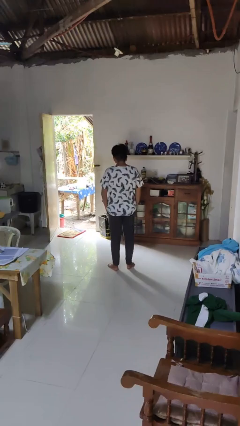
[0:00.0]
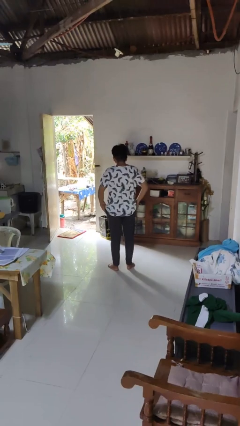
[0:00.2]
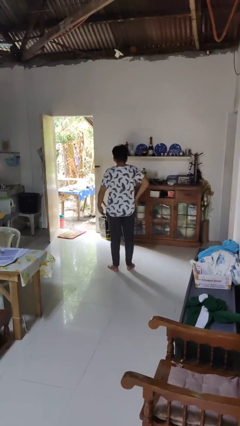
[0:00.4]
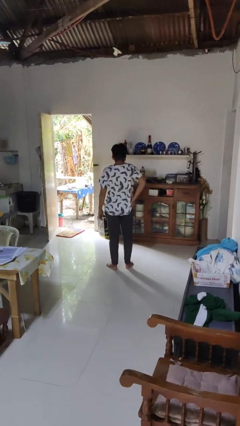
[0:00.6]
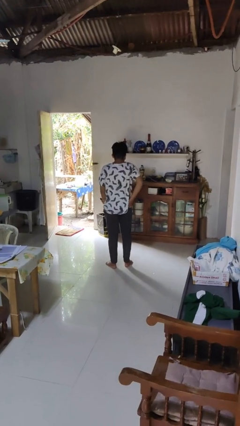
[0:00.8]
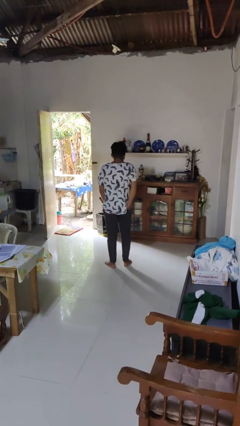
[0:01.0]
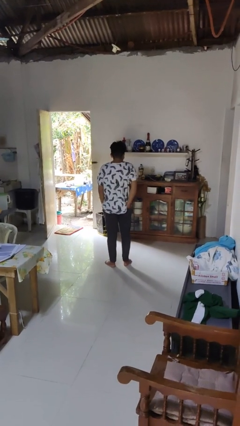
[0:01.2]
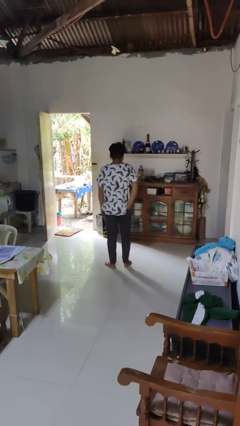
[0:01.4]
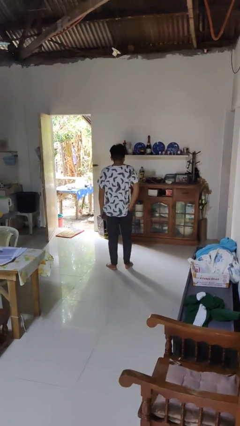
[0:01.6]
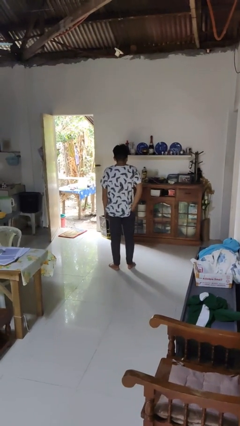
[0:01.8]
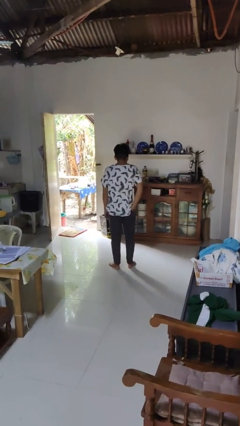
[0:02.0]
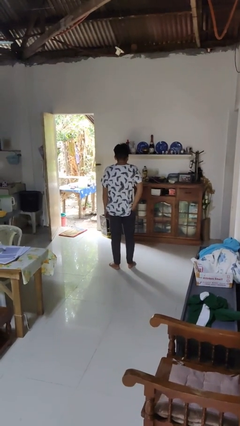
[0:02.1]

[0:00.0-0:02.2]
person puts hands in back pockets

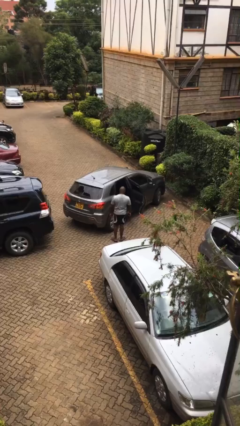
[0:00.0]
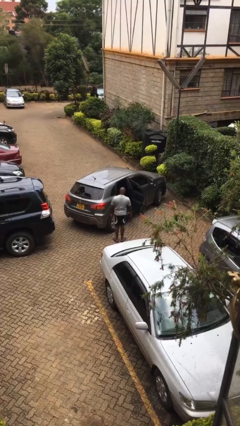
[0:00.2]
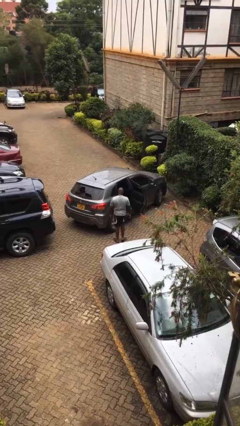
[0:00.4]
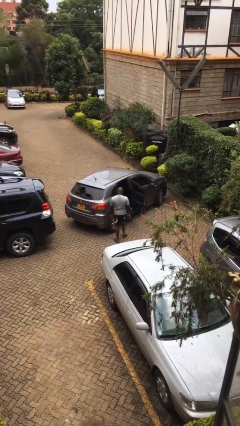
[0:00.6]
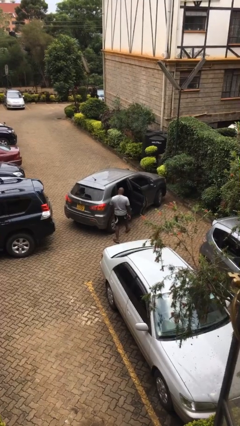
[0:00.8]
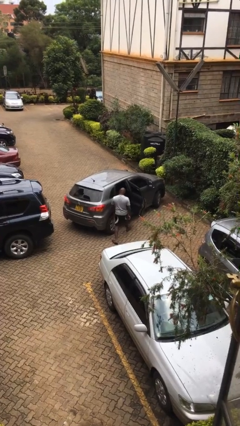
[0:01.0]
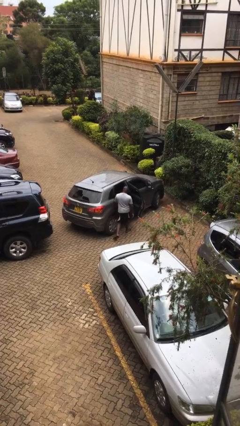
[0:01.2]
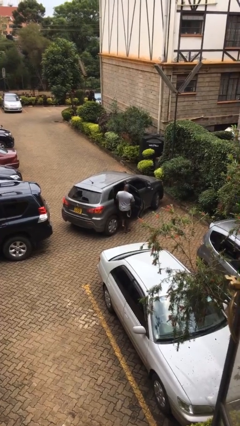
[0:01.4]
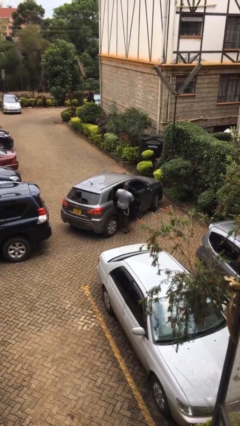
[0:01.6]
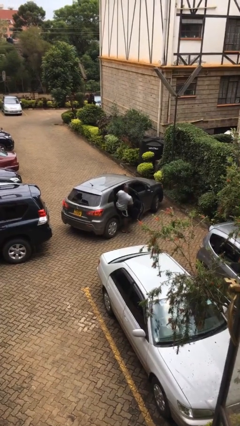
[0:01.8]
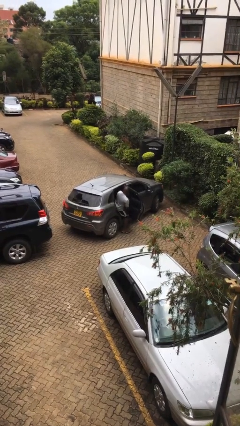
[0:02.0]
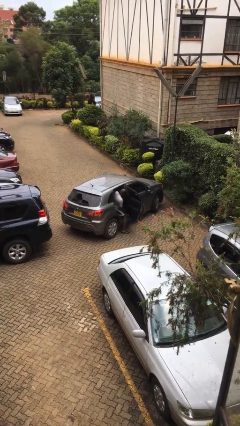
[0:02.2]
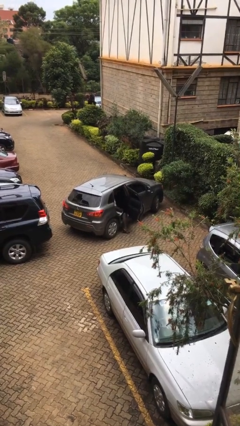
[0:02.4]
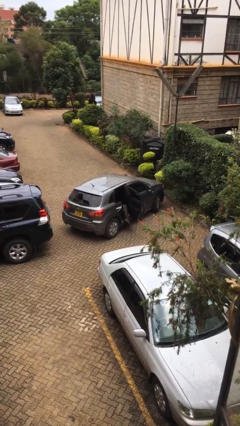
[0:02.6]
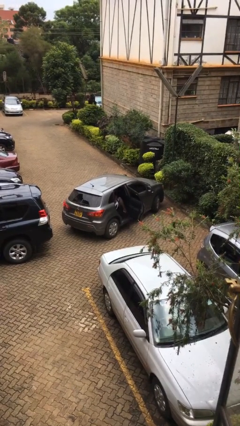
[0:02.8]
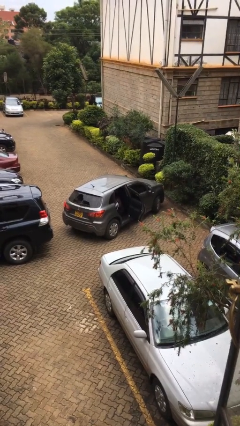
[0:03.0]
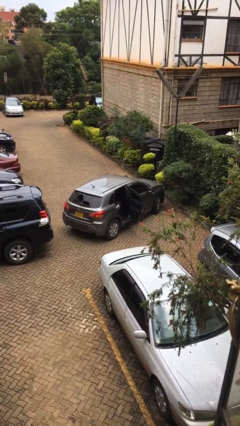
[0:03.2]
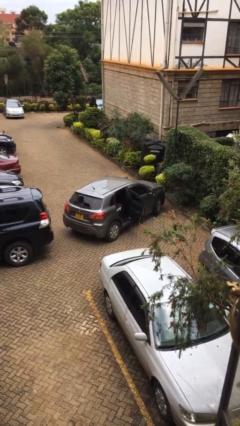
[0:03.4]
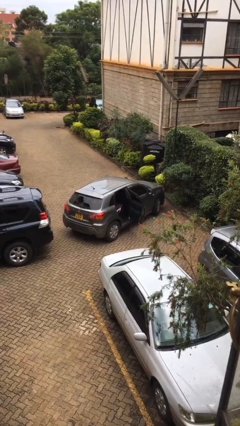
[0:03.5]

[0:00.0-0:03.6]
person enters car

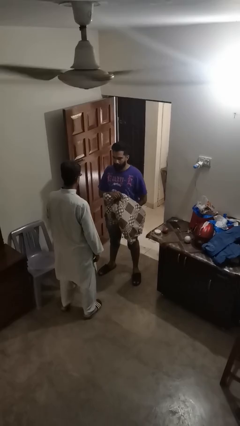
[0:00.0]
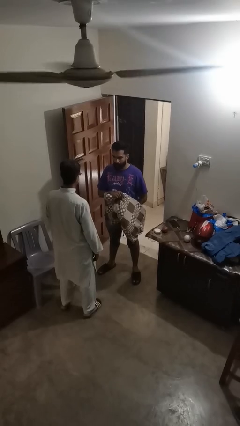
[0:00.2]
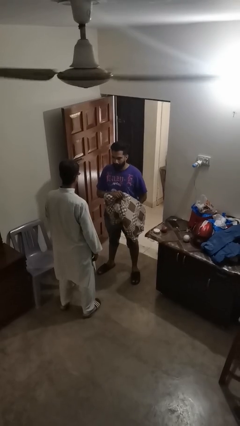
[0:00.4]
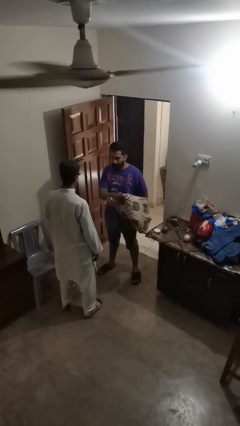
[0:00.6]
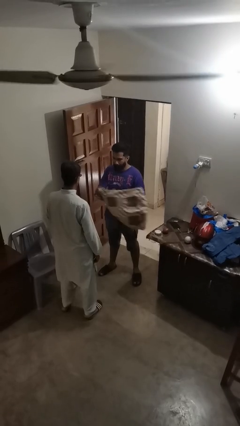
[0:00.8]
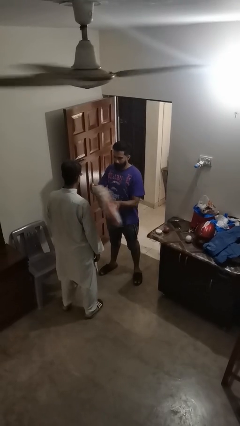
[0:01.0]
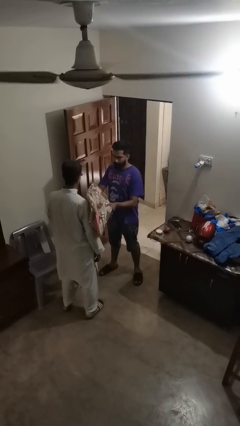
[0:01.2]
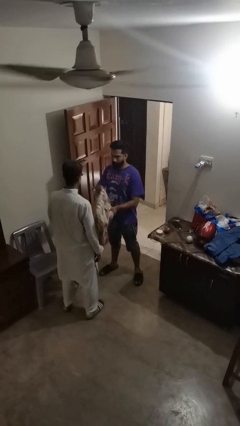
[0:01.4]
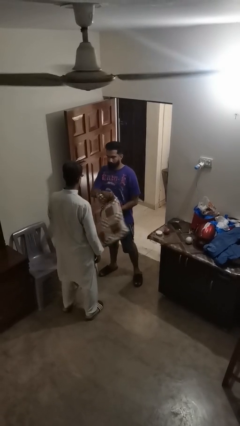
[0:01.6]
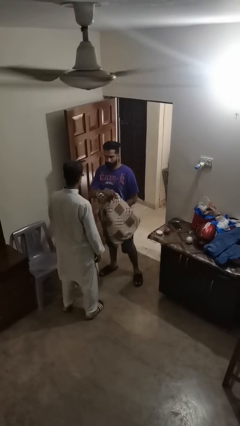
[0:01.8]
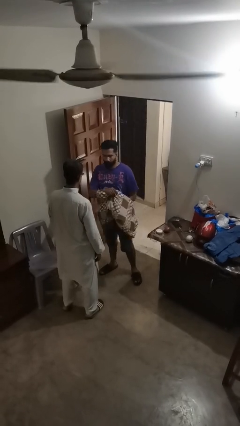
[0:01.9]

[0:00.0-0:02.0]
person hits person with pillow

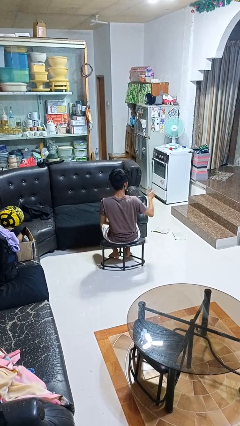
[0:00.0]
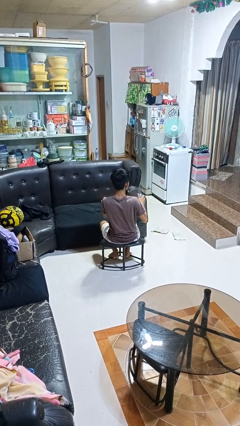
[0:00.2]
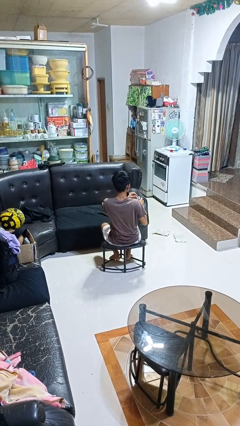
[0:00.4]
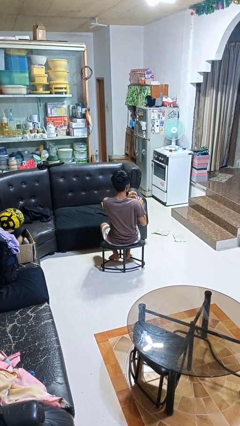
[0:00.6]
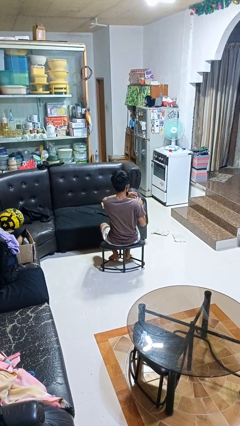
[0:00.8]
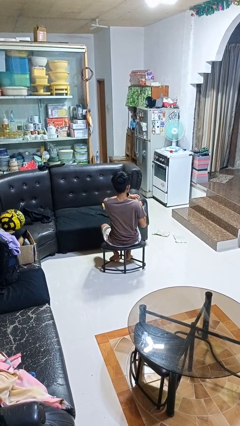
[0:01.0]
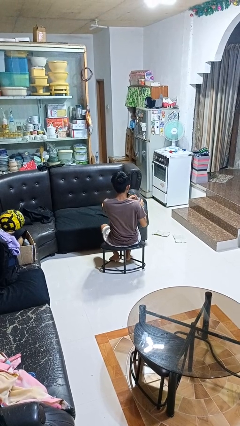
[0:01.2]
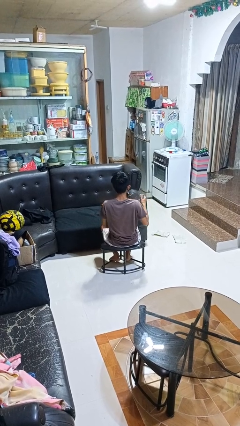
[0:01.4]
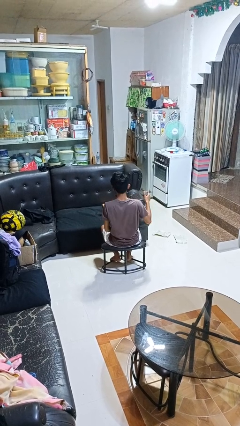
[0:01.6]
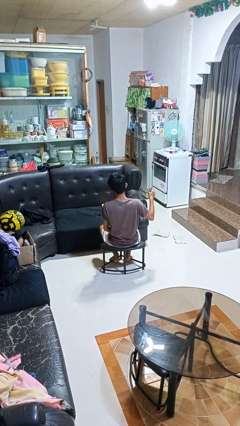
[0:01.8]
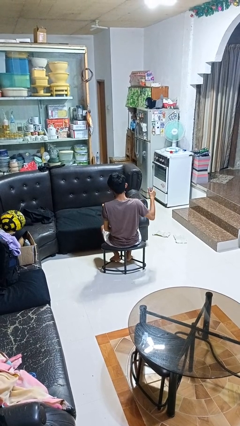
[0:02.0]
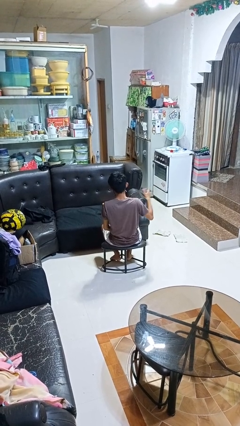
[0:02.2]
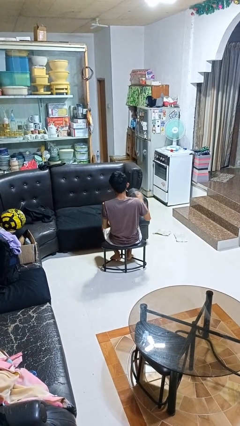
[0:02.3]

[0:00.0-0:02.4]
person opens beverage can

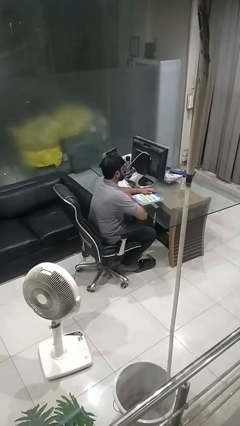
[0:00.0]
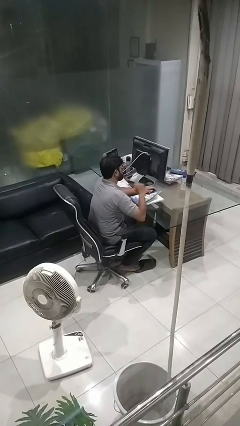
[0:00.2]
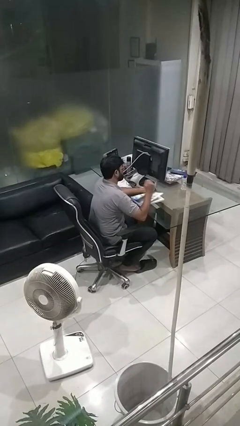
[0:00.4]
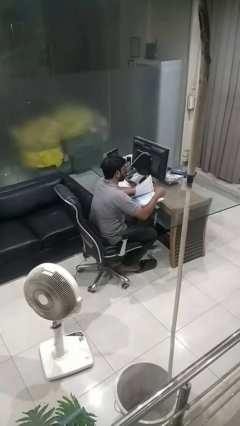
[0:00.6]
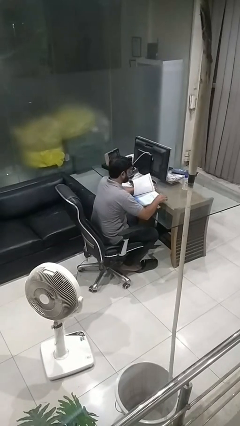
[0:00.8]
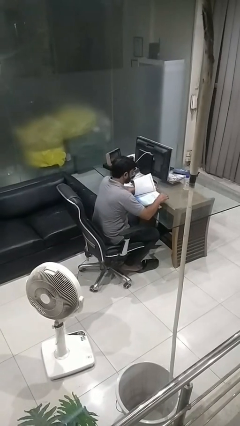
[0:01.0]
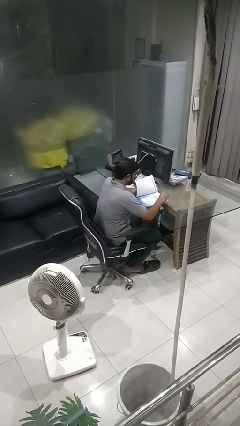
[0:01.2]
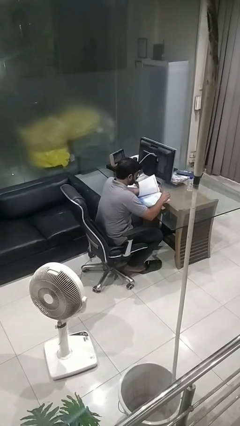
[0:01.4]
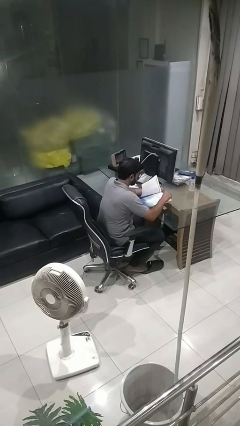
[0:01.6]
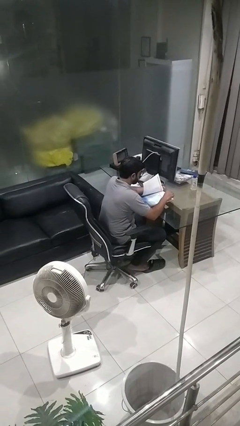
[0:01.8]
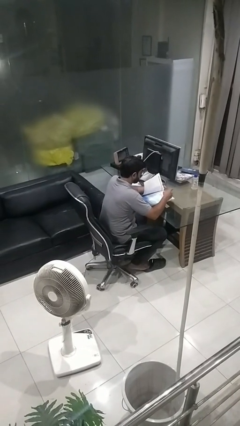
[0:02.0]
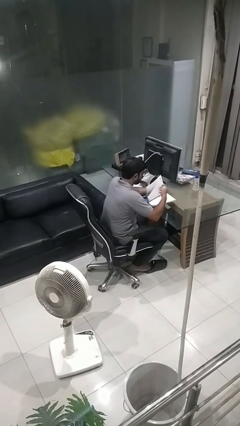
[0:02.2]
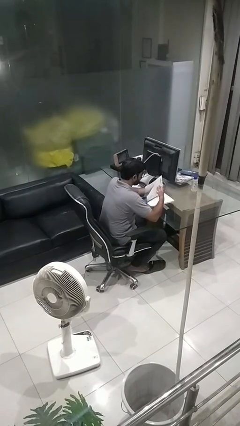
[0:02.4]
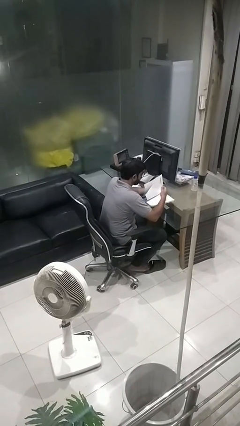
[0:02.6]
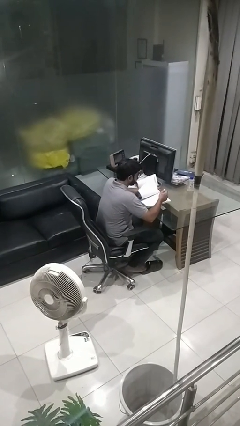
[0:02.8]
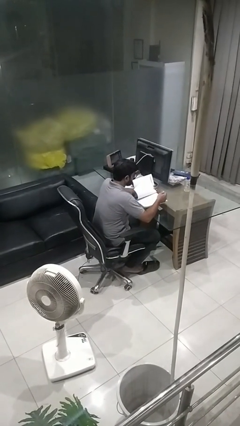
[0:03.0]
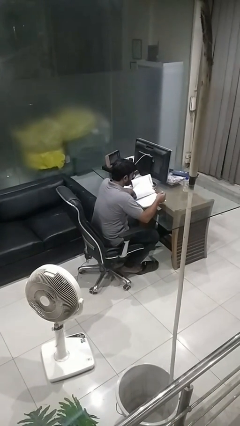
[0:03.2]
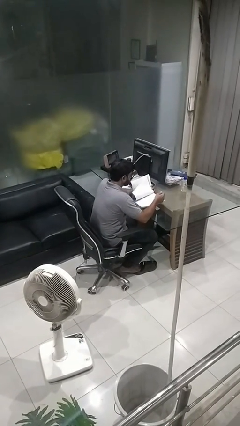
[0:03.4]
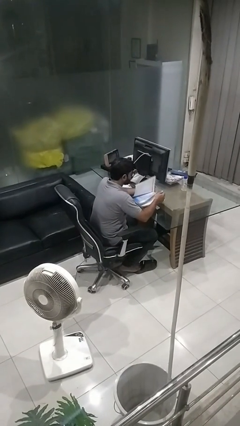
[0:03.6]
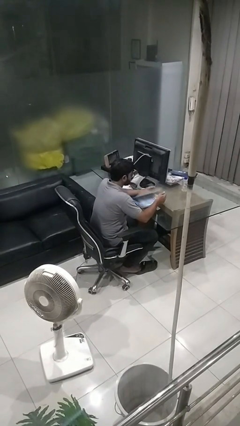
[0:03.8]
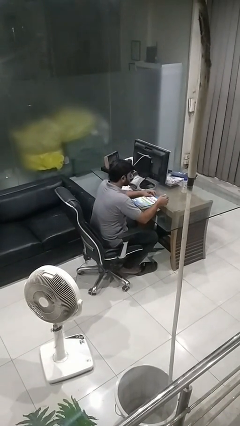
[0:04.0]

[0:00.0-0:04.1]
person reads book

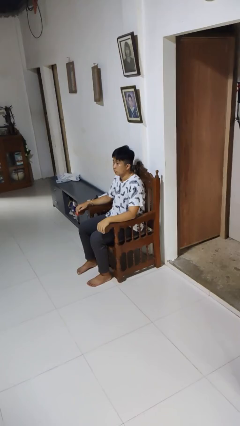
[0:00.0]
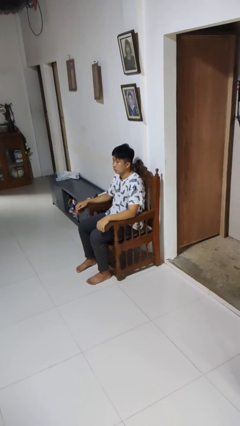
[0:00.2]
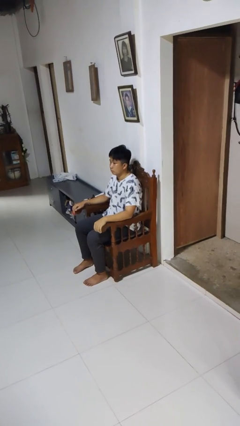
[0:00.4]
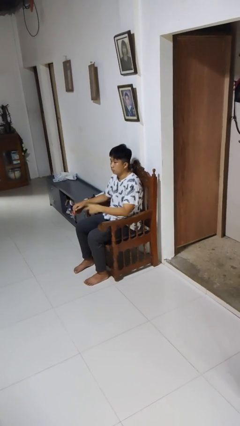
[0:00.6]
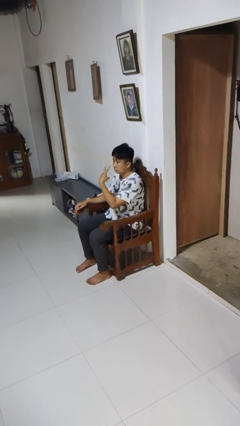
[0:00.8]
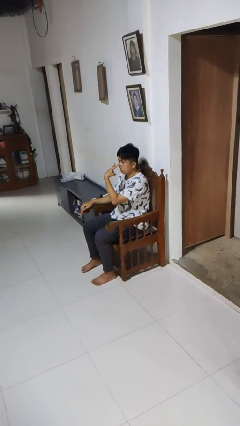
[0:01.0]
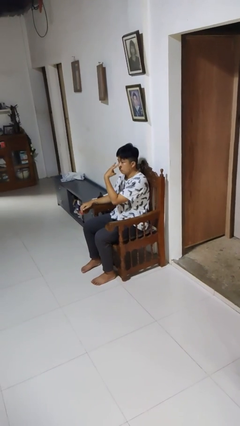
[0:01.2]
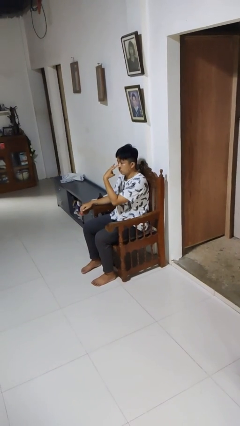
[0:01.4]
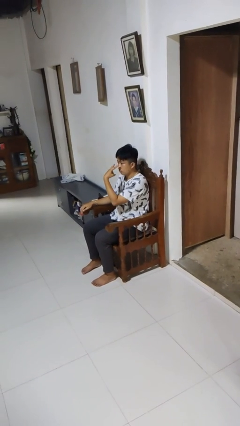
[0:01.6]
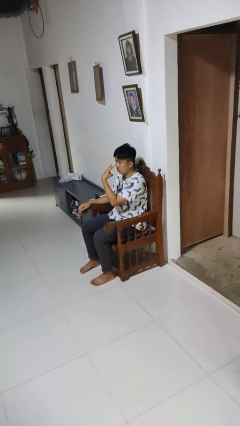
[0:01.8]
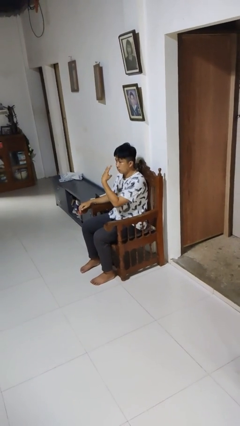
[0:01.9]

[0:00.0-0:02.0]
person gestures watch closely

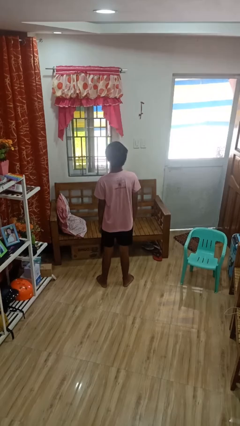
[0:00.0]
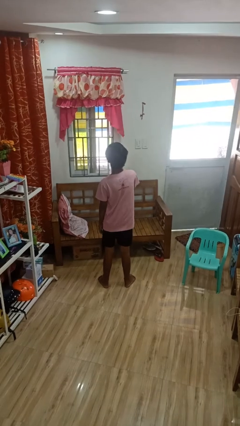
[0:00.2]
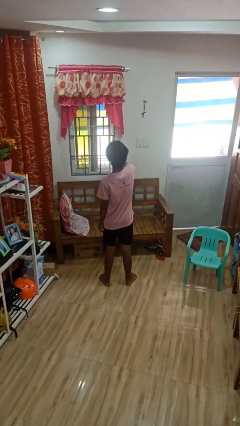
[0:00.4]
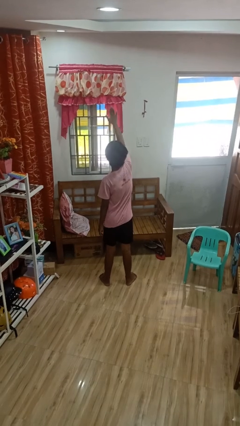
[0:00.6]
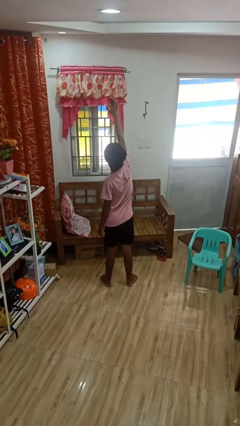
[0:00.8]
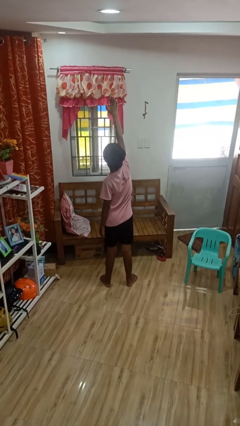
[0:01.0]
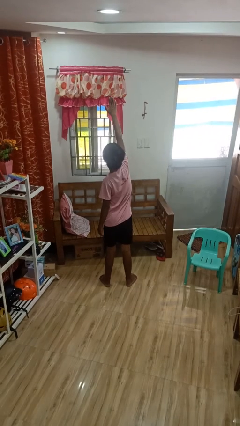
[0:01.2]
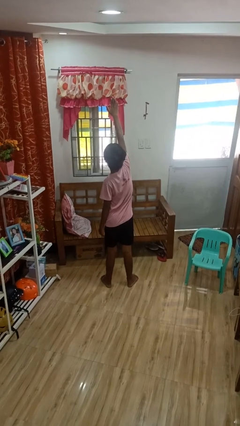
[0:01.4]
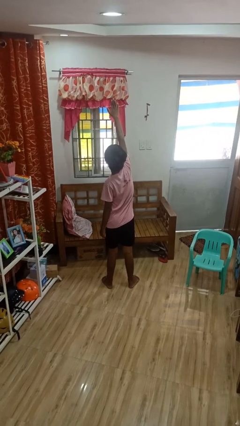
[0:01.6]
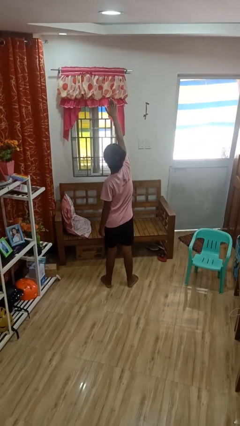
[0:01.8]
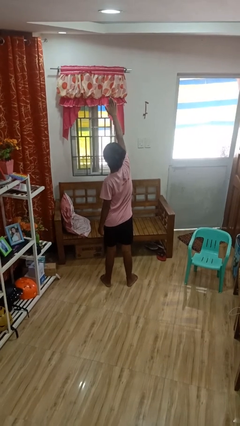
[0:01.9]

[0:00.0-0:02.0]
person gestures stop
